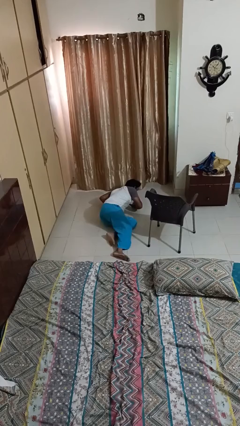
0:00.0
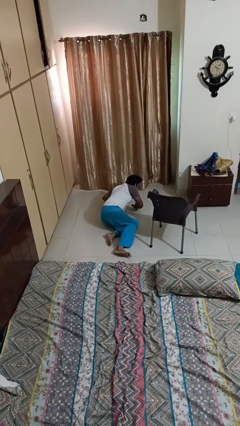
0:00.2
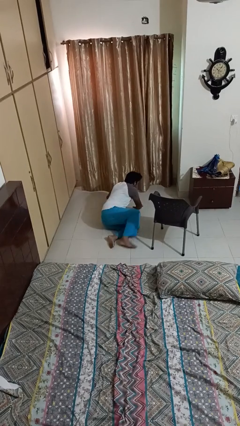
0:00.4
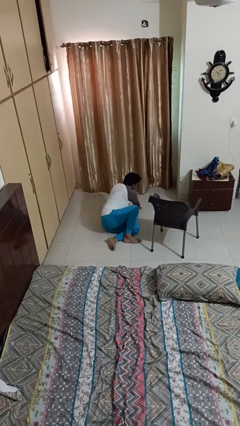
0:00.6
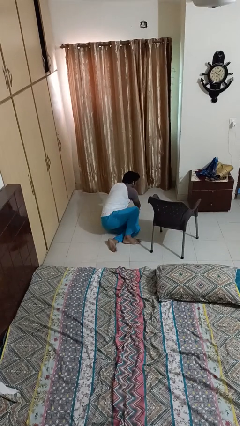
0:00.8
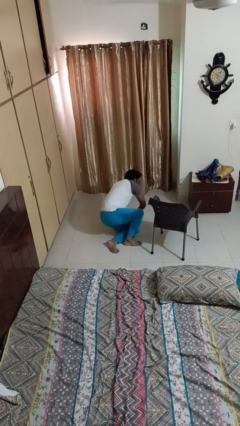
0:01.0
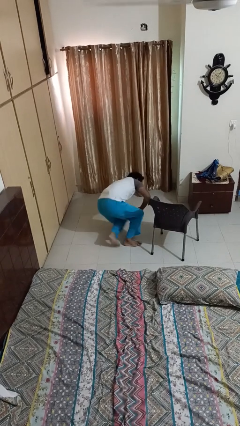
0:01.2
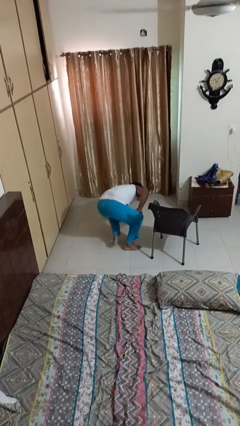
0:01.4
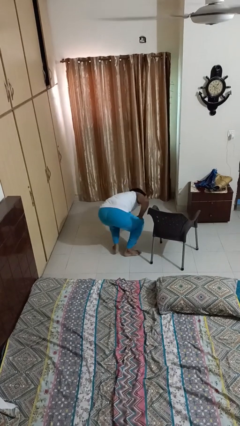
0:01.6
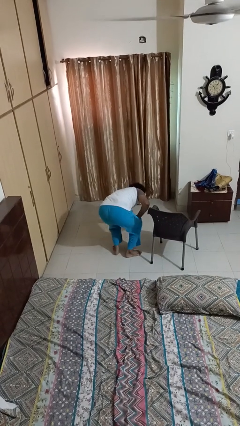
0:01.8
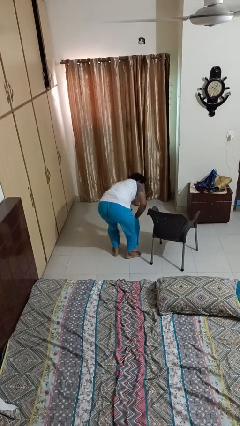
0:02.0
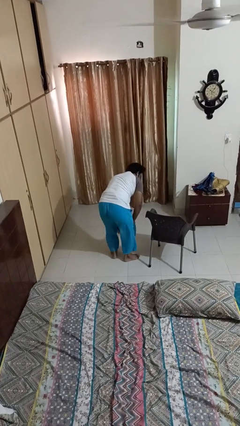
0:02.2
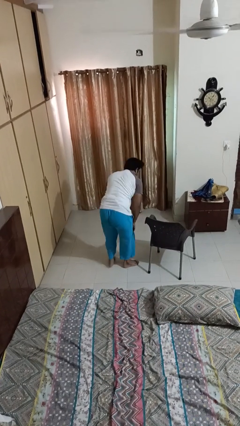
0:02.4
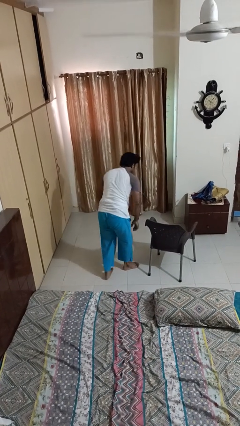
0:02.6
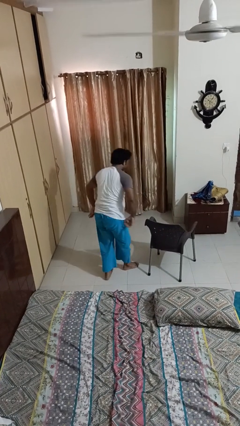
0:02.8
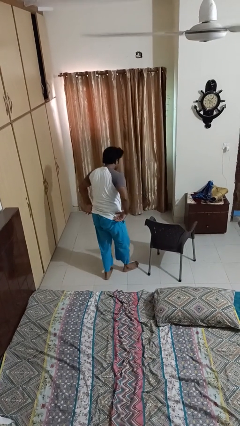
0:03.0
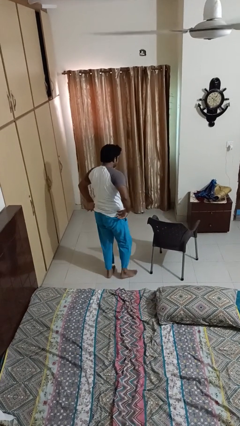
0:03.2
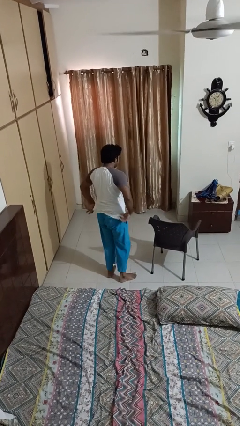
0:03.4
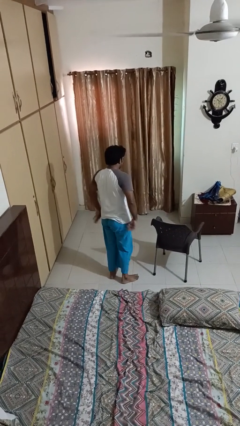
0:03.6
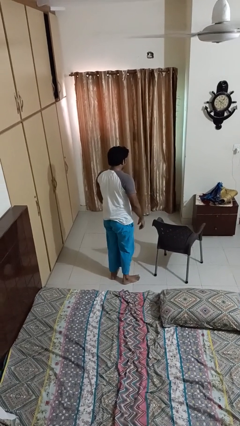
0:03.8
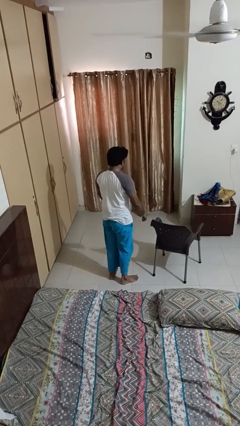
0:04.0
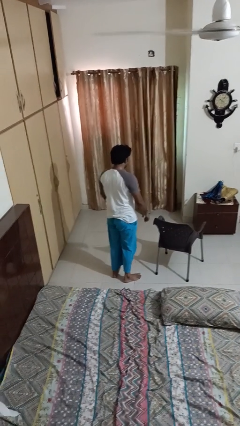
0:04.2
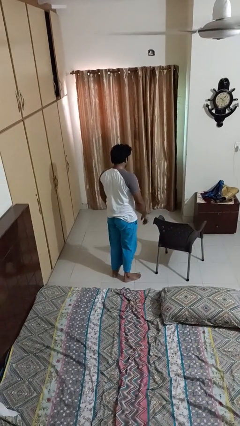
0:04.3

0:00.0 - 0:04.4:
person stands up from floor

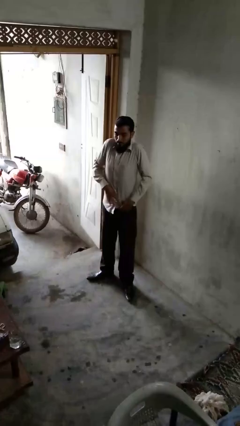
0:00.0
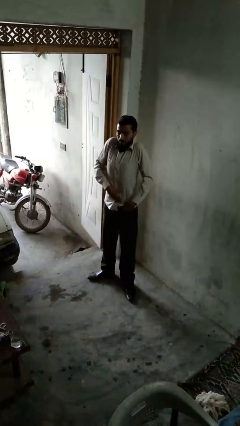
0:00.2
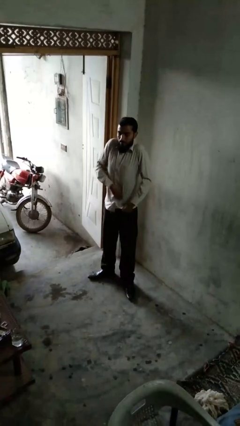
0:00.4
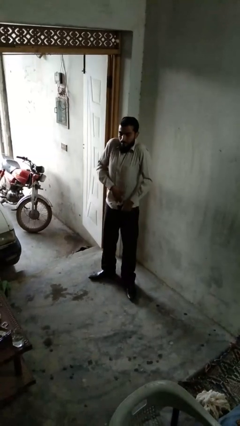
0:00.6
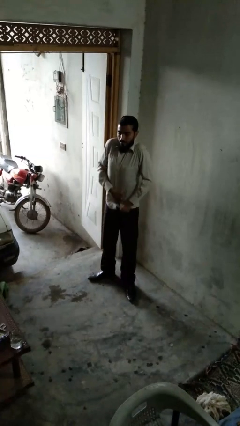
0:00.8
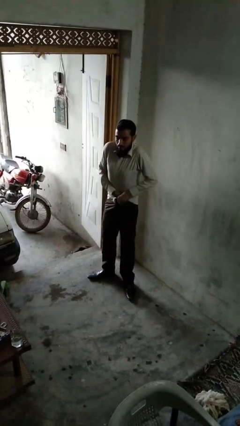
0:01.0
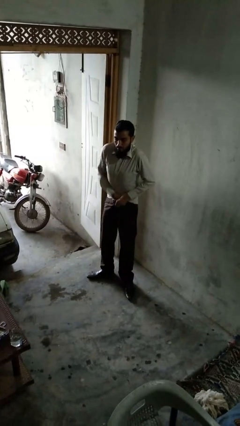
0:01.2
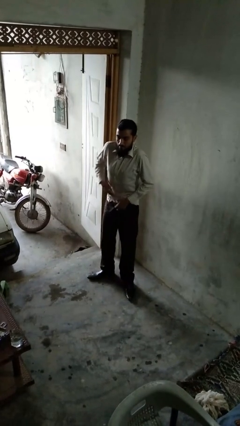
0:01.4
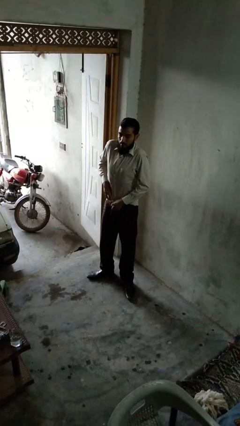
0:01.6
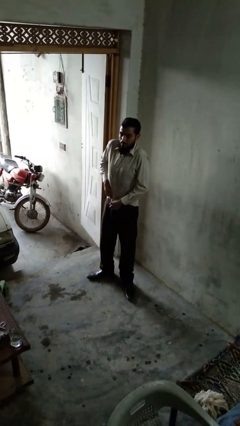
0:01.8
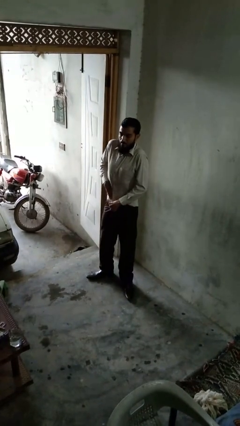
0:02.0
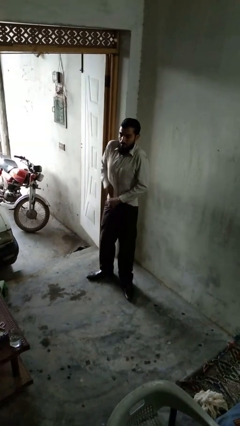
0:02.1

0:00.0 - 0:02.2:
person tucks in shirt

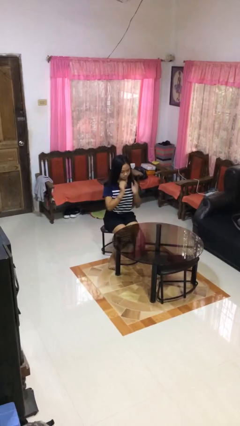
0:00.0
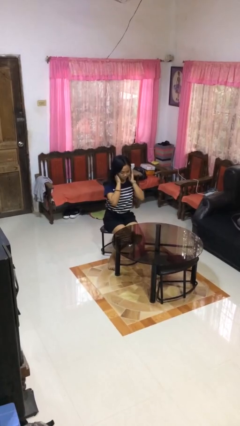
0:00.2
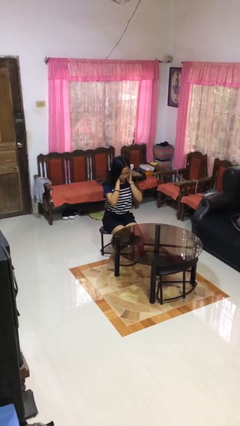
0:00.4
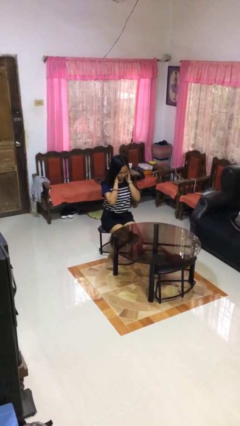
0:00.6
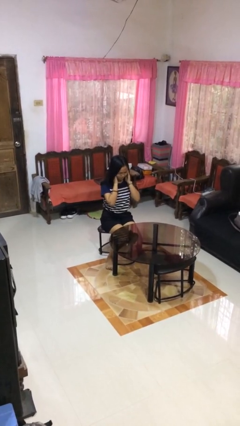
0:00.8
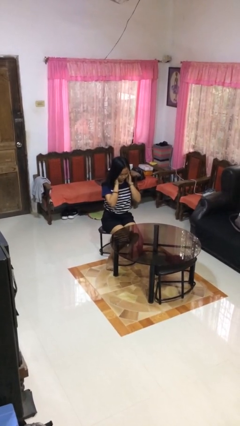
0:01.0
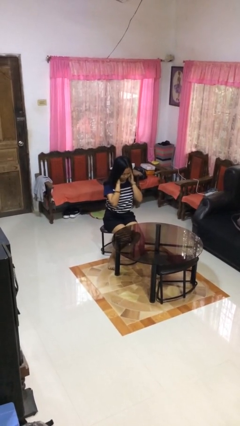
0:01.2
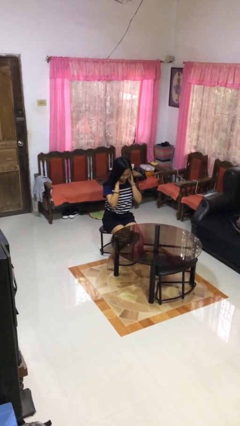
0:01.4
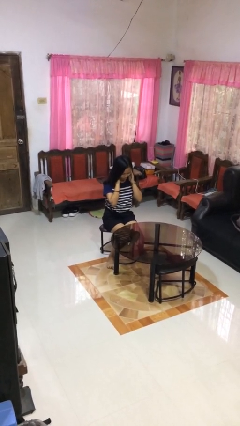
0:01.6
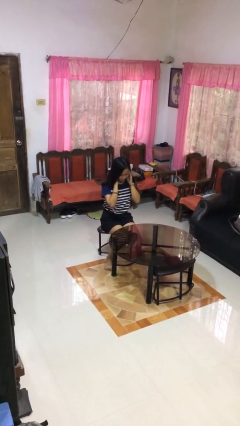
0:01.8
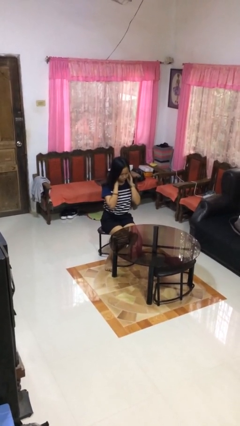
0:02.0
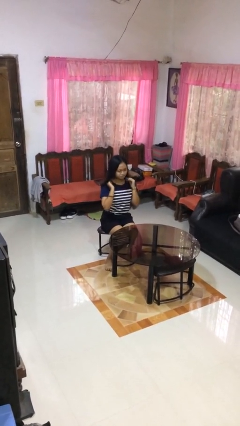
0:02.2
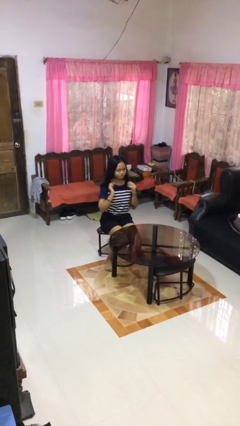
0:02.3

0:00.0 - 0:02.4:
person puts fingers in ear

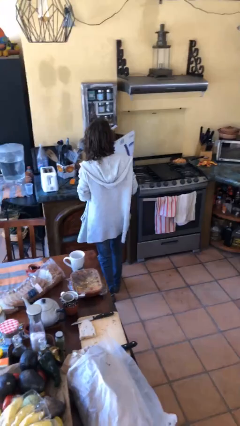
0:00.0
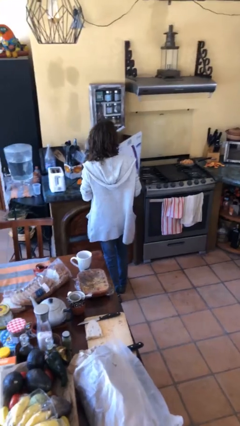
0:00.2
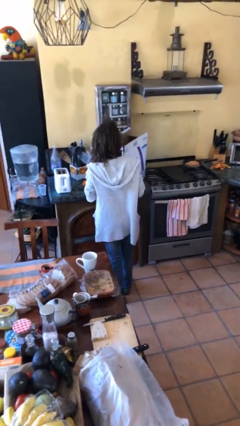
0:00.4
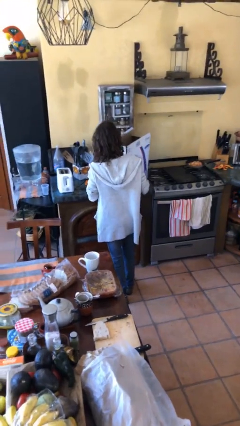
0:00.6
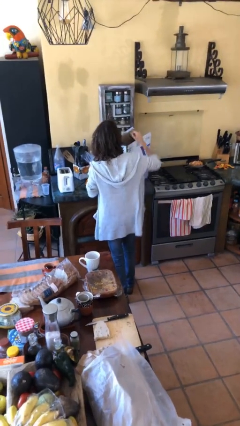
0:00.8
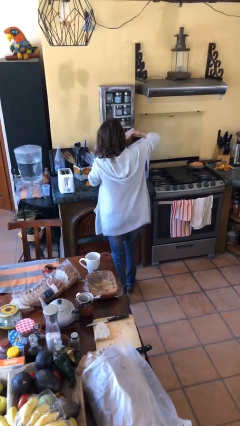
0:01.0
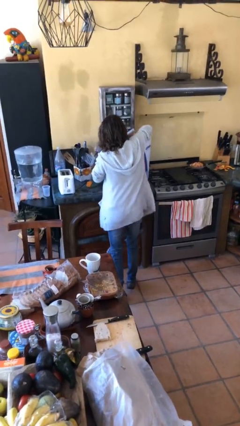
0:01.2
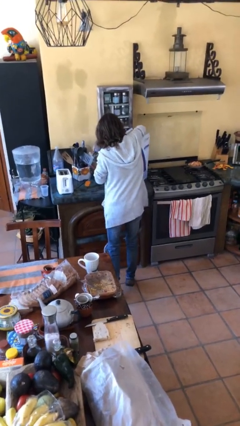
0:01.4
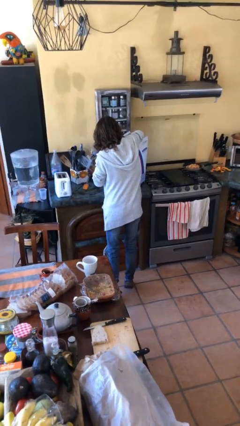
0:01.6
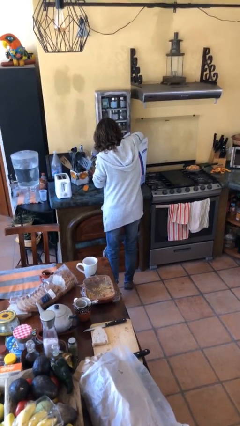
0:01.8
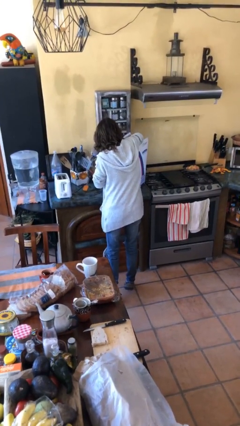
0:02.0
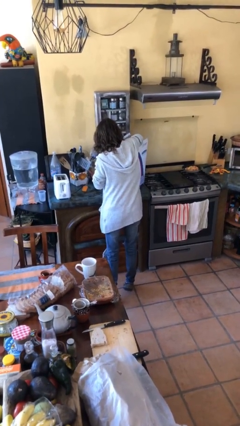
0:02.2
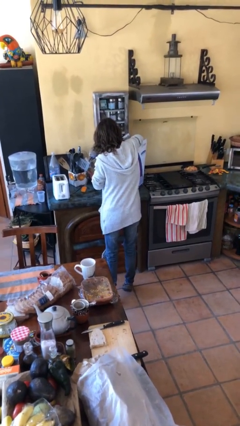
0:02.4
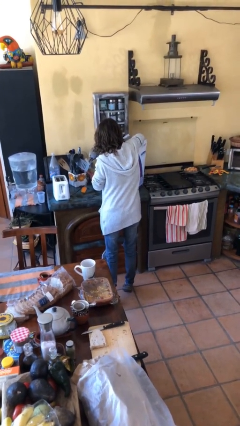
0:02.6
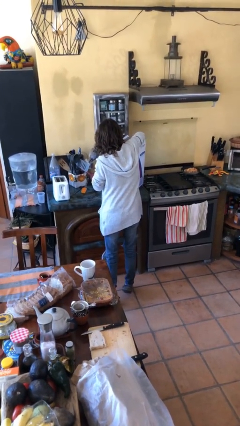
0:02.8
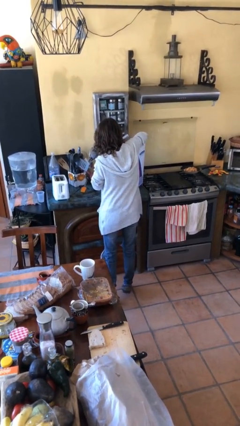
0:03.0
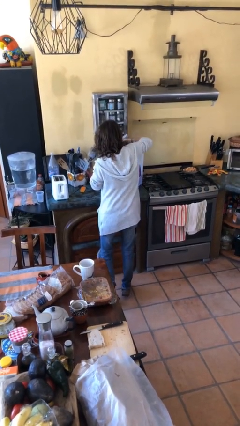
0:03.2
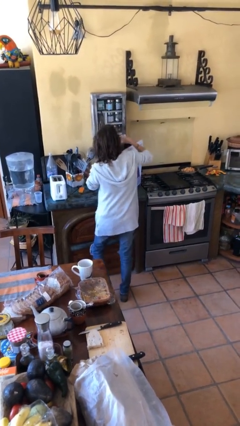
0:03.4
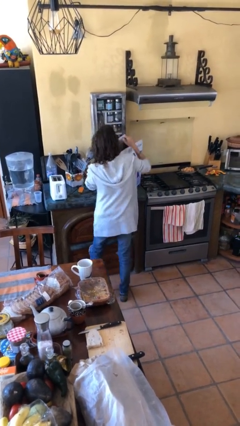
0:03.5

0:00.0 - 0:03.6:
person searches in box

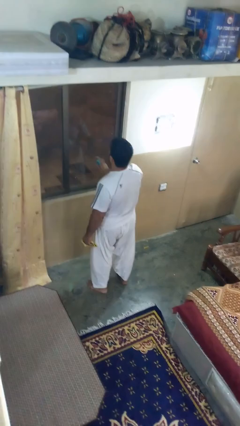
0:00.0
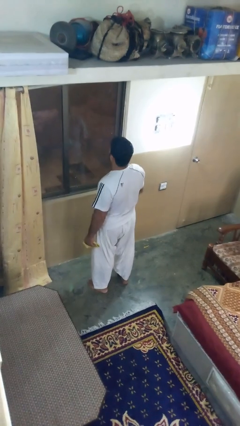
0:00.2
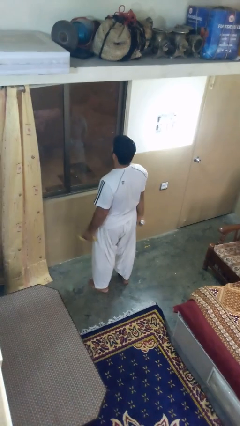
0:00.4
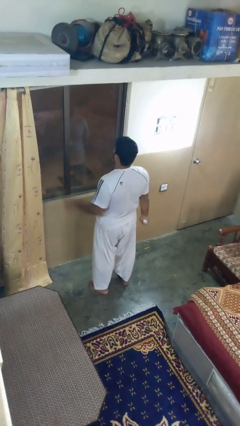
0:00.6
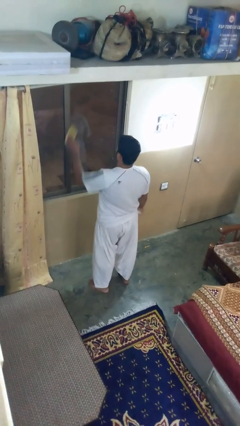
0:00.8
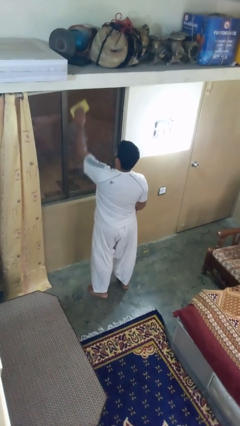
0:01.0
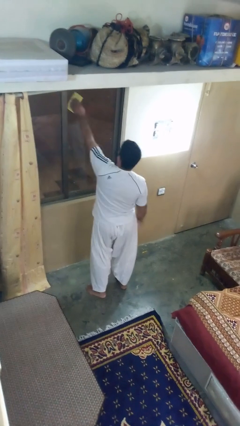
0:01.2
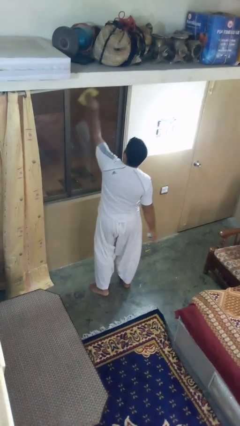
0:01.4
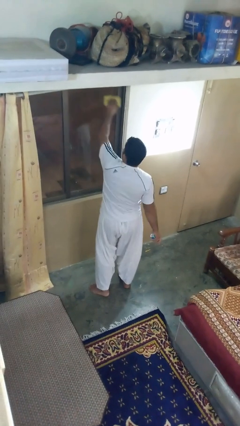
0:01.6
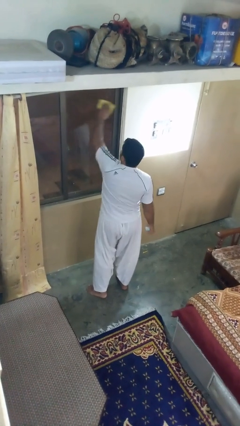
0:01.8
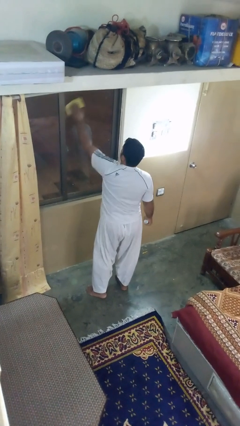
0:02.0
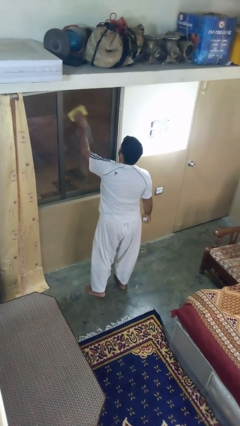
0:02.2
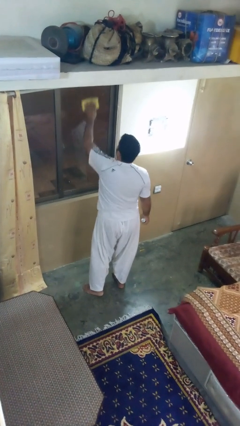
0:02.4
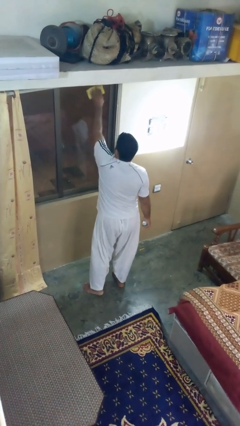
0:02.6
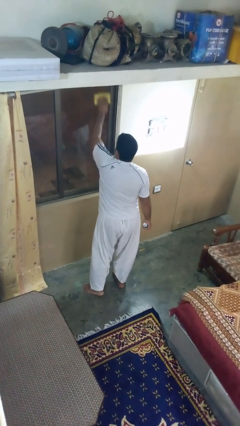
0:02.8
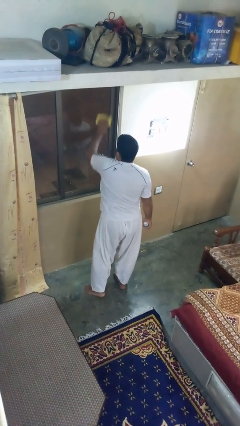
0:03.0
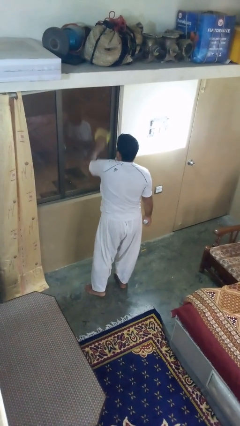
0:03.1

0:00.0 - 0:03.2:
person washes window

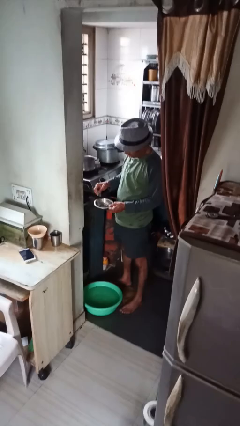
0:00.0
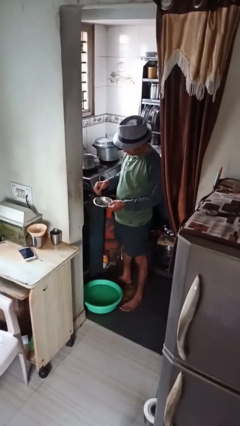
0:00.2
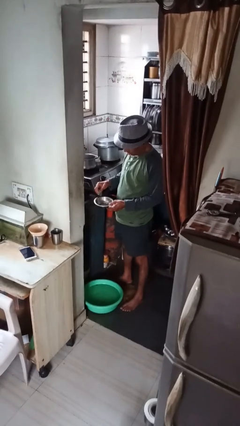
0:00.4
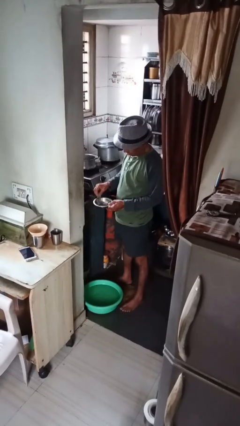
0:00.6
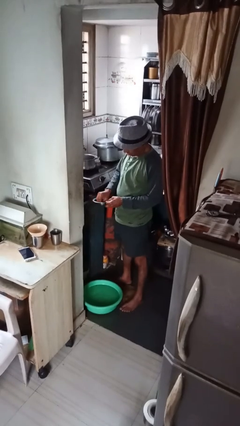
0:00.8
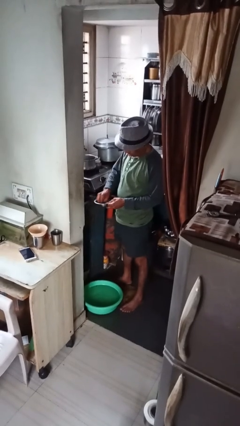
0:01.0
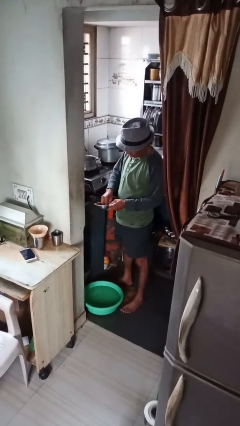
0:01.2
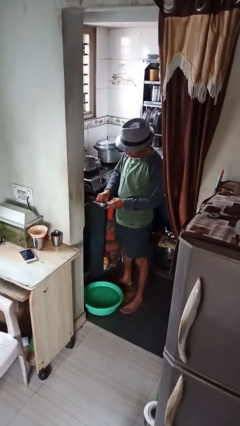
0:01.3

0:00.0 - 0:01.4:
person washes dish

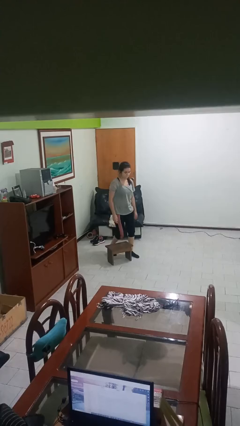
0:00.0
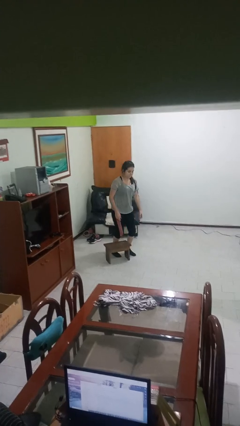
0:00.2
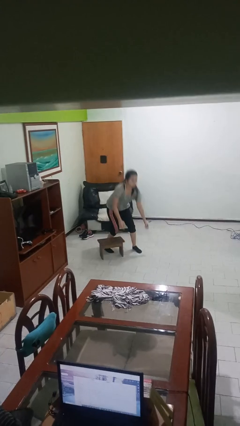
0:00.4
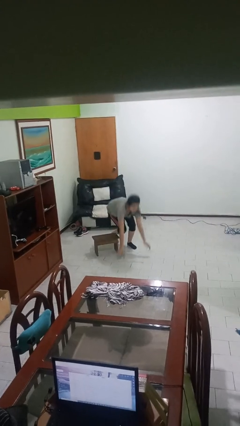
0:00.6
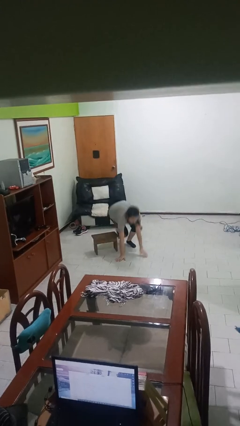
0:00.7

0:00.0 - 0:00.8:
person trips on object on floor
